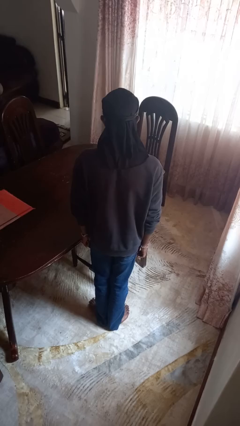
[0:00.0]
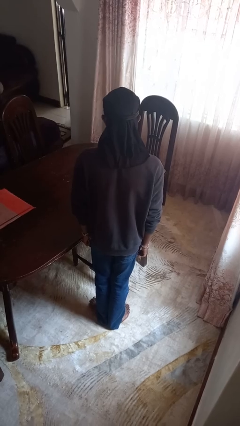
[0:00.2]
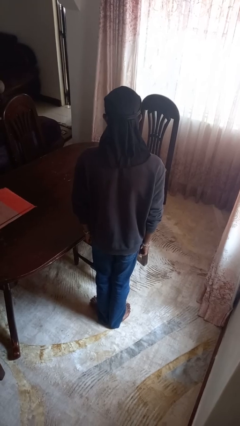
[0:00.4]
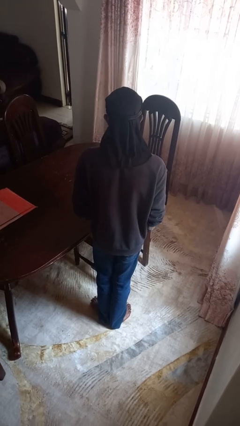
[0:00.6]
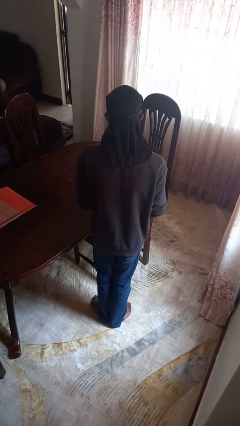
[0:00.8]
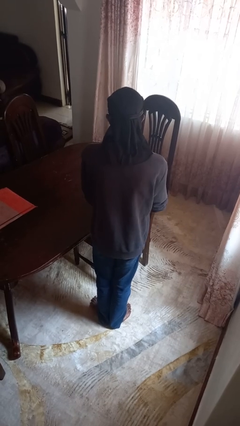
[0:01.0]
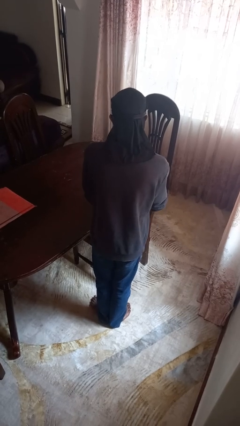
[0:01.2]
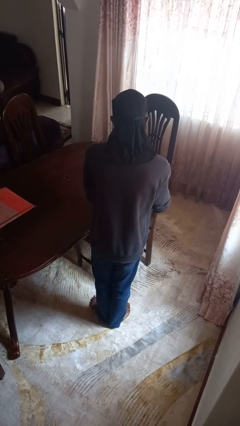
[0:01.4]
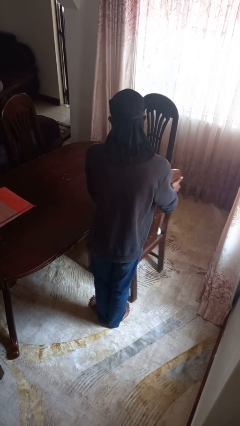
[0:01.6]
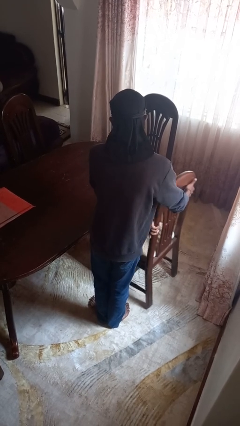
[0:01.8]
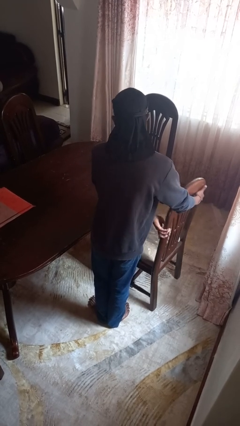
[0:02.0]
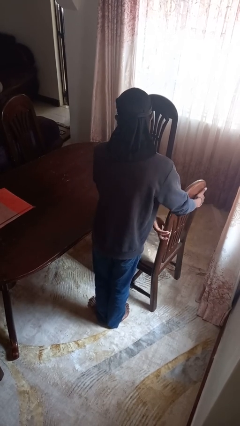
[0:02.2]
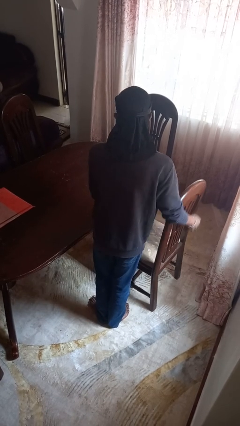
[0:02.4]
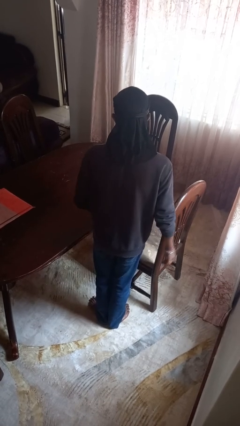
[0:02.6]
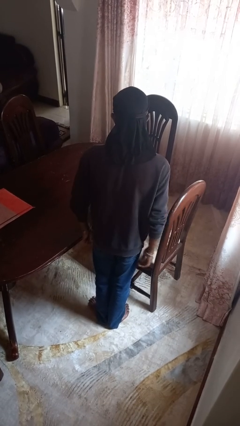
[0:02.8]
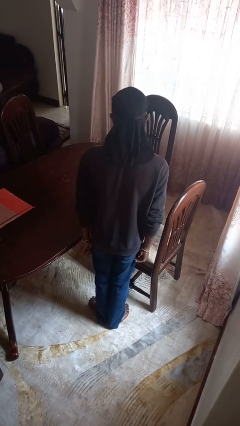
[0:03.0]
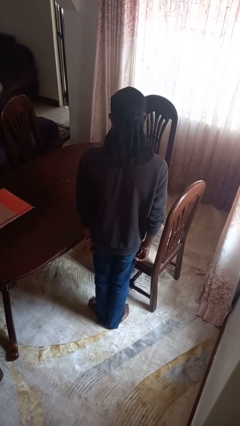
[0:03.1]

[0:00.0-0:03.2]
person pulls out chair

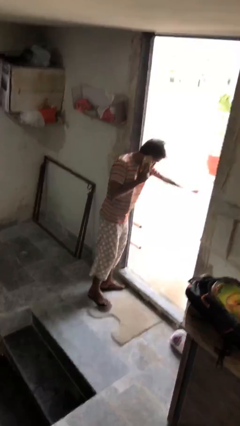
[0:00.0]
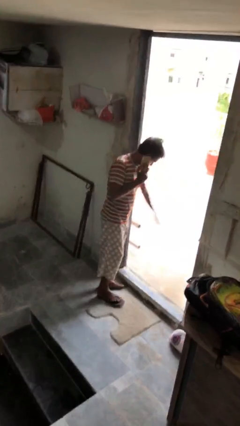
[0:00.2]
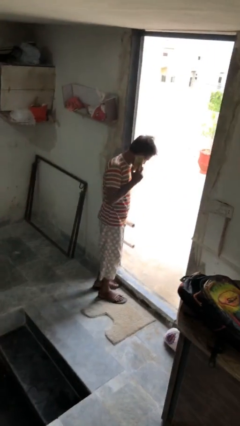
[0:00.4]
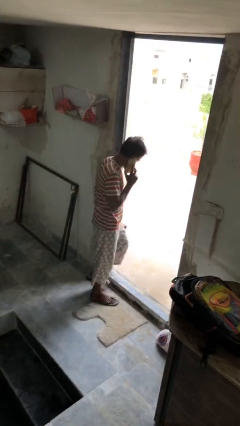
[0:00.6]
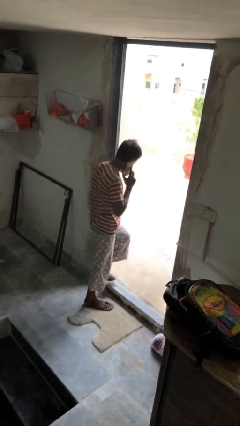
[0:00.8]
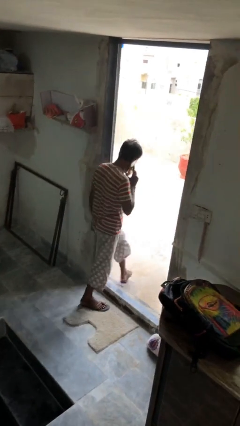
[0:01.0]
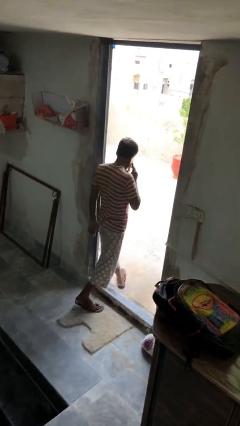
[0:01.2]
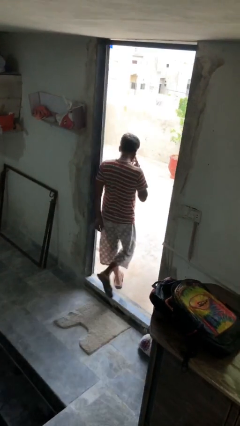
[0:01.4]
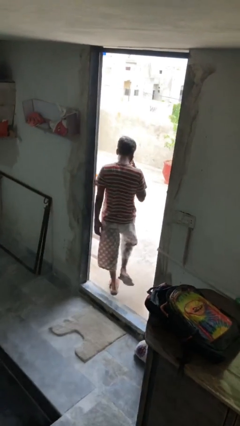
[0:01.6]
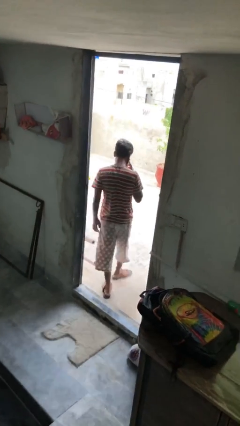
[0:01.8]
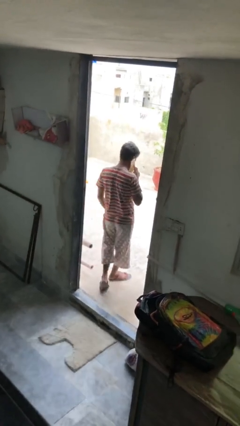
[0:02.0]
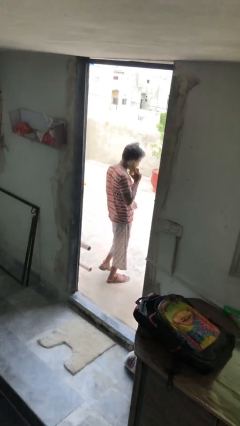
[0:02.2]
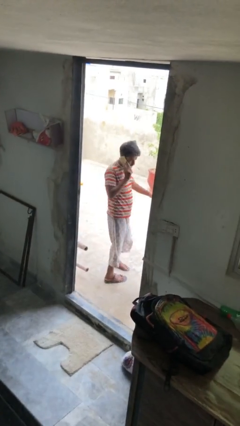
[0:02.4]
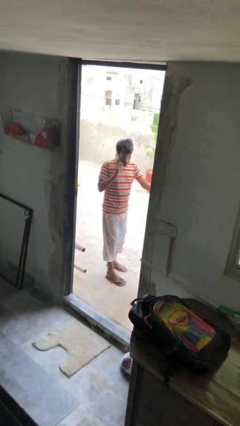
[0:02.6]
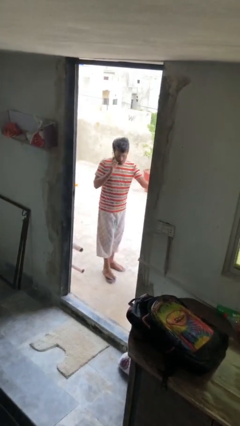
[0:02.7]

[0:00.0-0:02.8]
person exits scene through structure

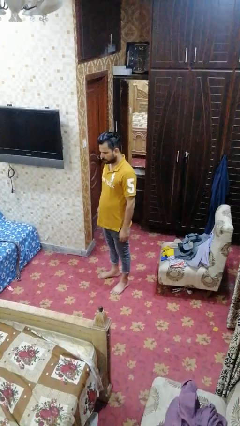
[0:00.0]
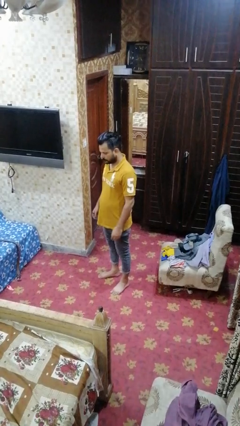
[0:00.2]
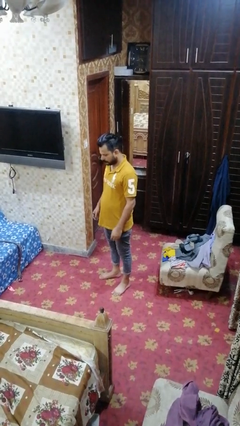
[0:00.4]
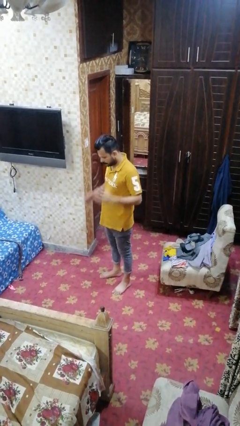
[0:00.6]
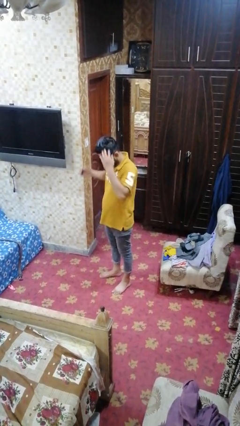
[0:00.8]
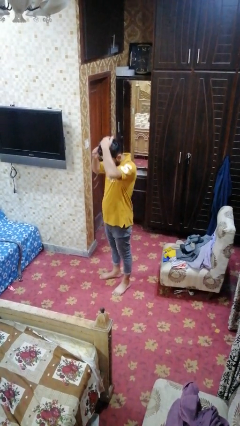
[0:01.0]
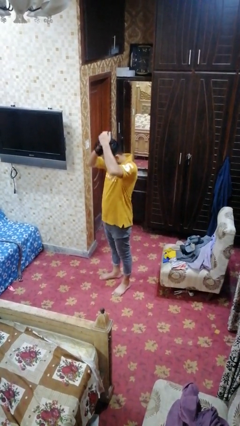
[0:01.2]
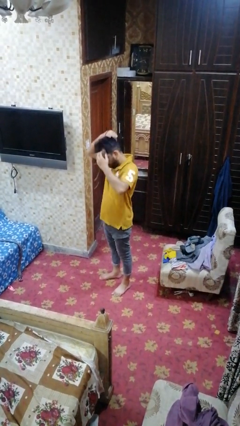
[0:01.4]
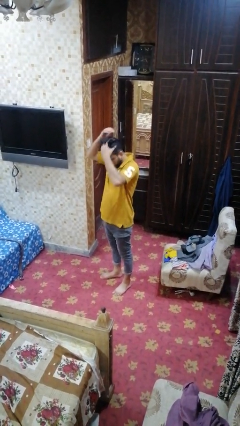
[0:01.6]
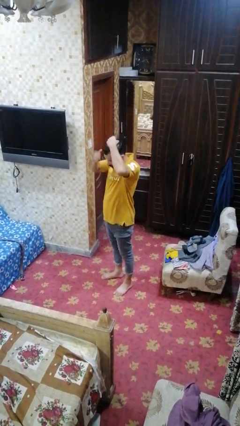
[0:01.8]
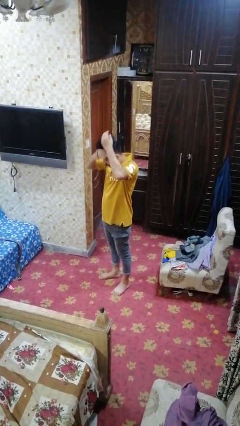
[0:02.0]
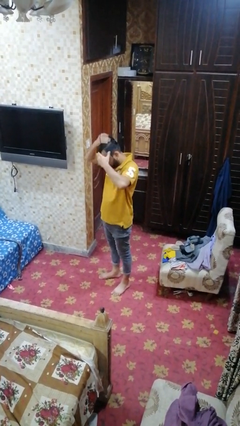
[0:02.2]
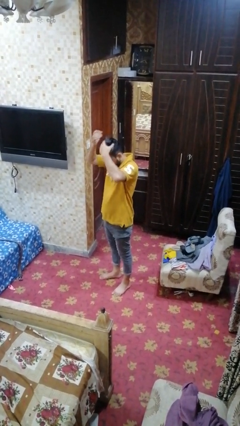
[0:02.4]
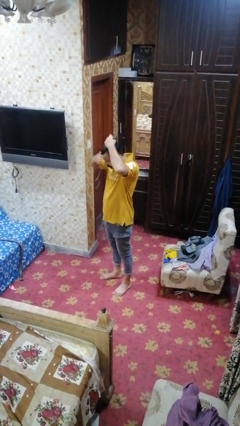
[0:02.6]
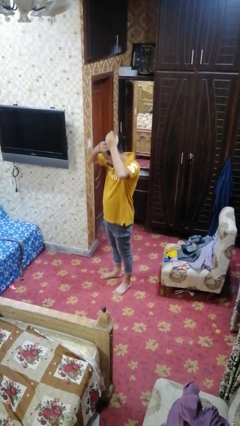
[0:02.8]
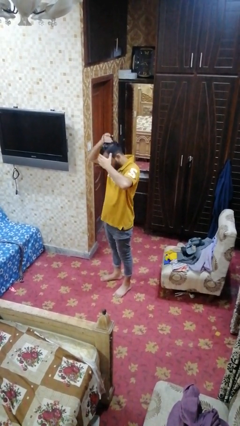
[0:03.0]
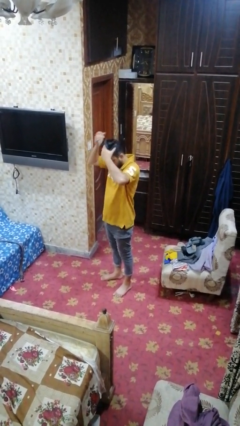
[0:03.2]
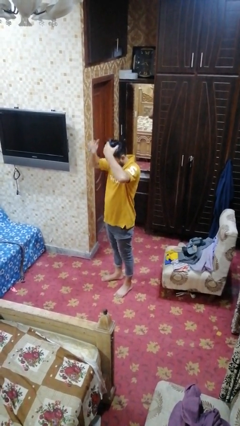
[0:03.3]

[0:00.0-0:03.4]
person puts hair in ponytail

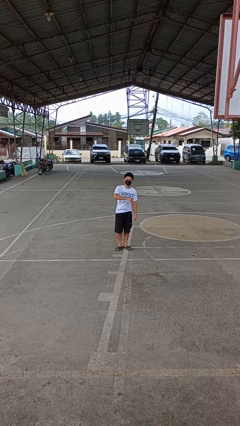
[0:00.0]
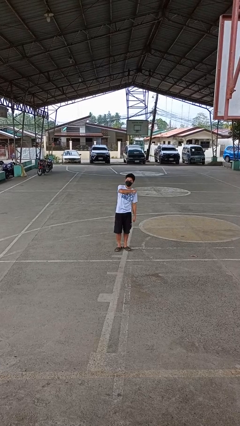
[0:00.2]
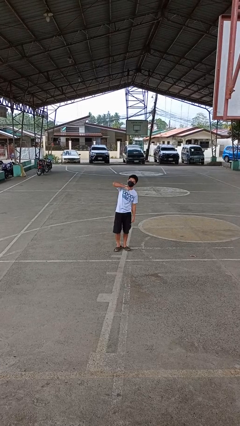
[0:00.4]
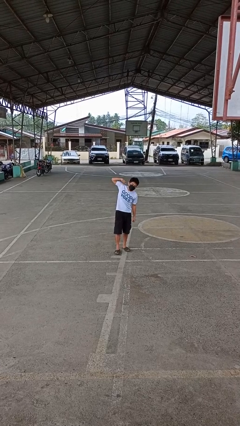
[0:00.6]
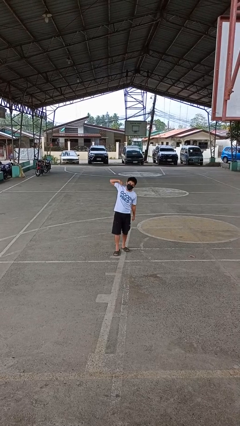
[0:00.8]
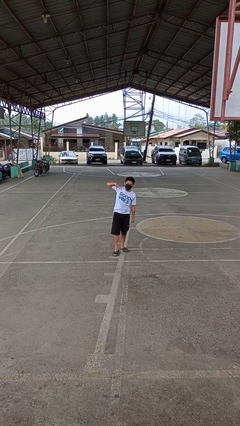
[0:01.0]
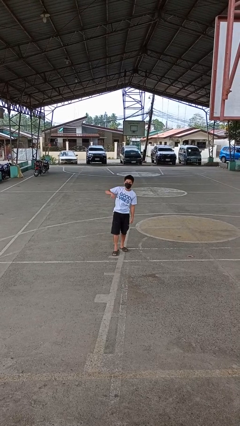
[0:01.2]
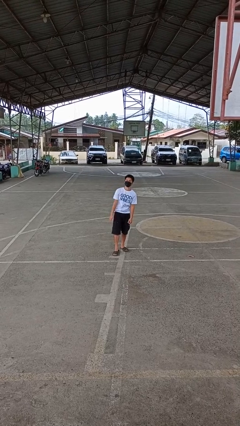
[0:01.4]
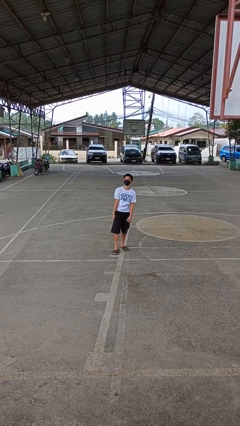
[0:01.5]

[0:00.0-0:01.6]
person gestures cut

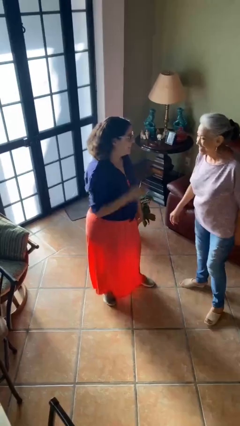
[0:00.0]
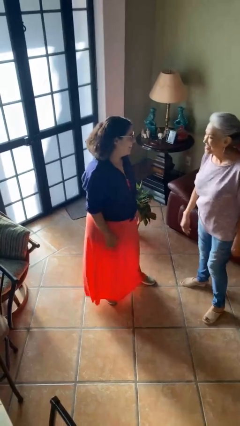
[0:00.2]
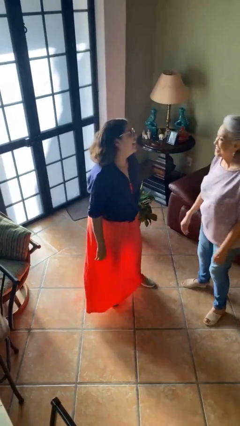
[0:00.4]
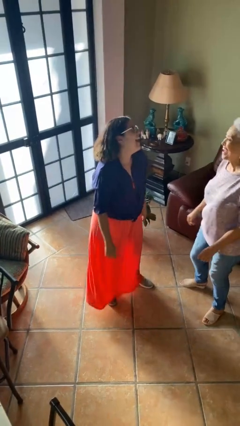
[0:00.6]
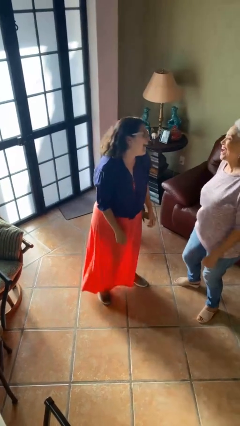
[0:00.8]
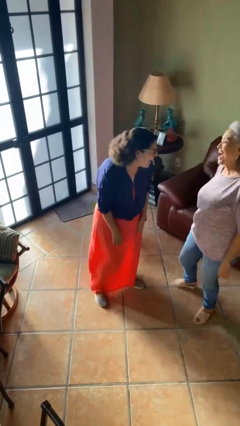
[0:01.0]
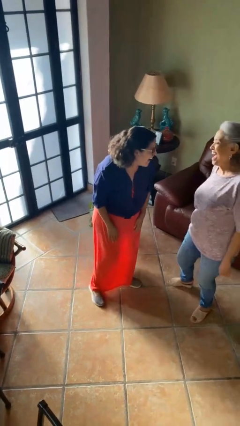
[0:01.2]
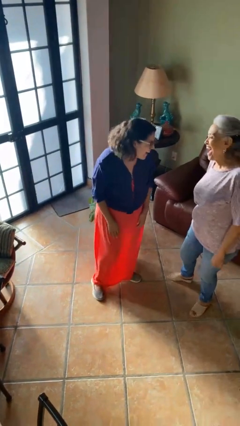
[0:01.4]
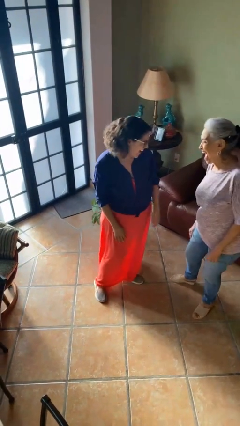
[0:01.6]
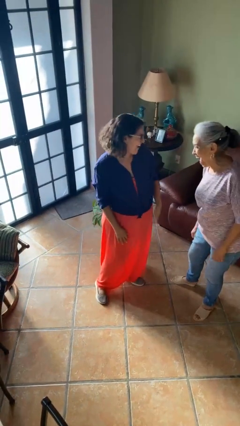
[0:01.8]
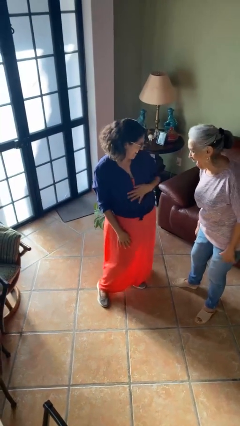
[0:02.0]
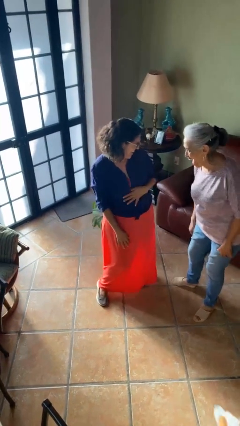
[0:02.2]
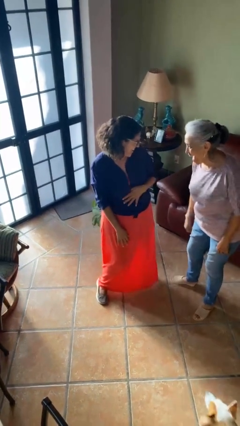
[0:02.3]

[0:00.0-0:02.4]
person laughs with person

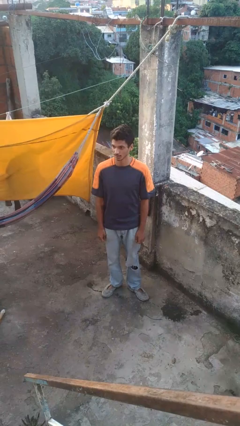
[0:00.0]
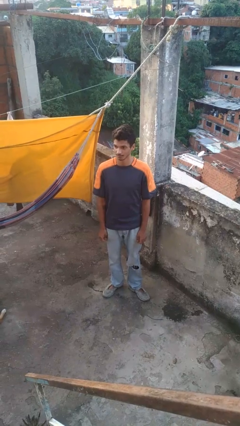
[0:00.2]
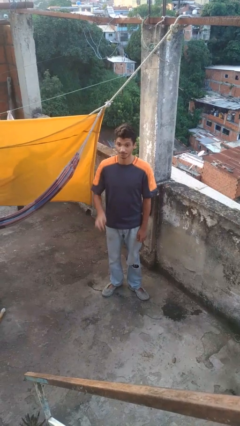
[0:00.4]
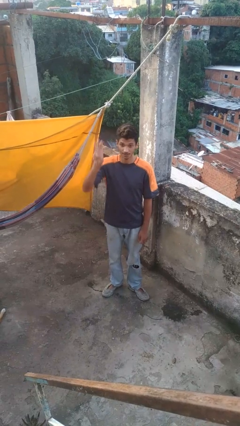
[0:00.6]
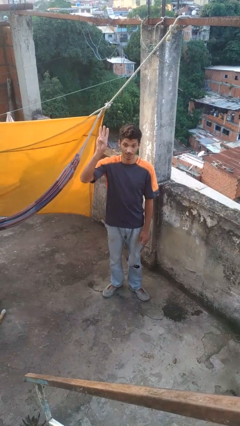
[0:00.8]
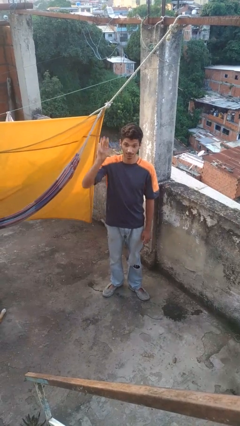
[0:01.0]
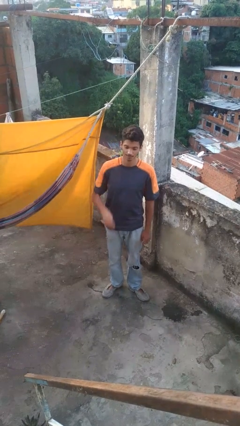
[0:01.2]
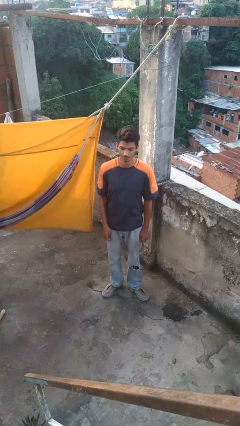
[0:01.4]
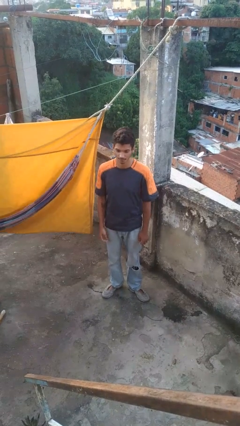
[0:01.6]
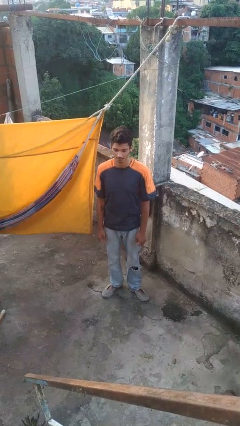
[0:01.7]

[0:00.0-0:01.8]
person gestures number three

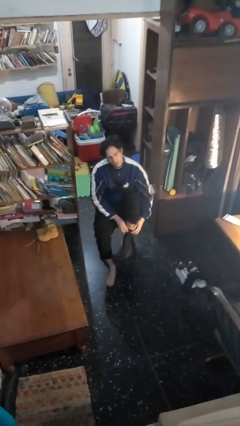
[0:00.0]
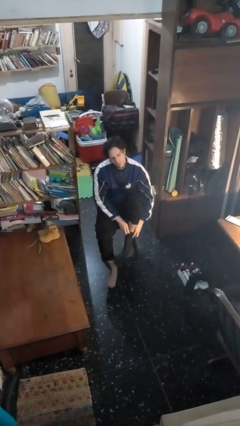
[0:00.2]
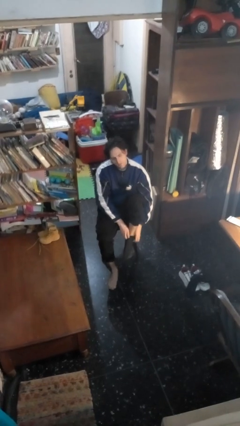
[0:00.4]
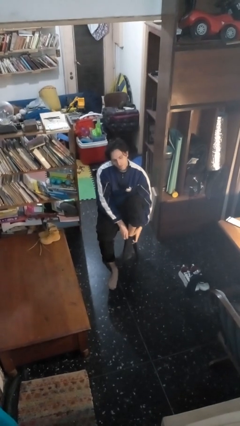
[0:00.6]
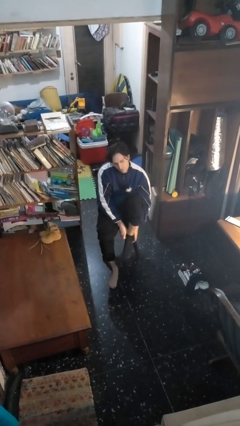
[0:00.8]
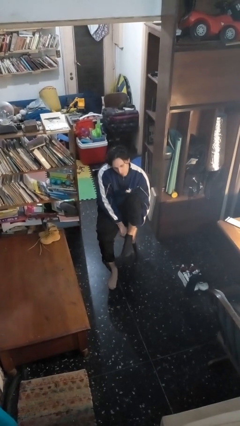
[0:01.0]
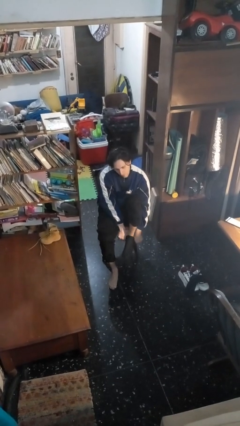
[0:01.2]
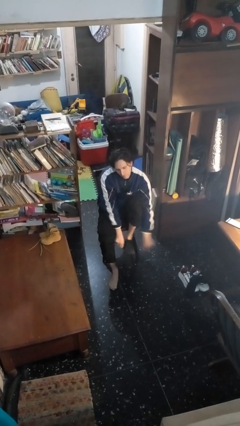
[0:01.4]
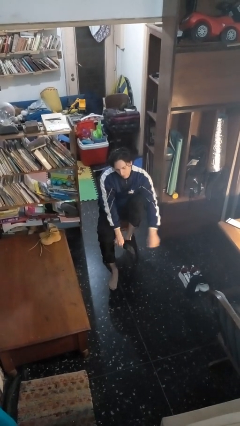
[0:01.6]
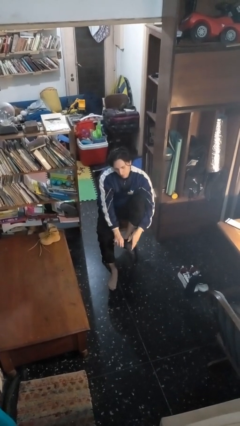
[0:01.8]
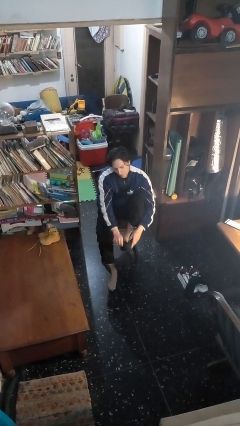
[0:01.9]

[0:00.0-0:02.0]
person takes off socks

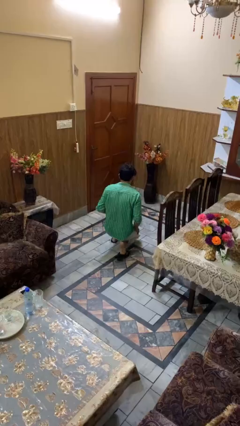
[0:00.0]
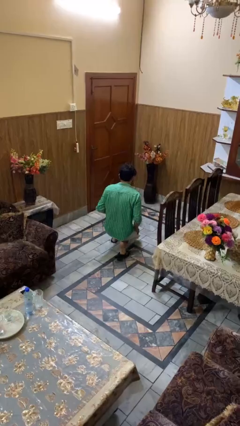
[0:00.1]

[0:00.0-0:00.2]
person stands up from floor
